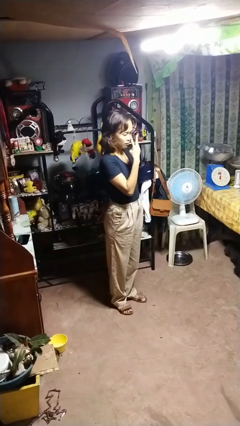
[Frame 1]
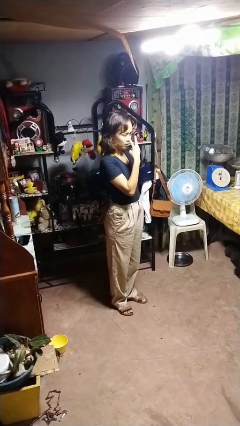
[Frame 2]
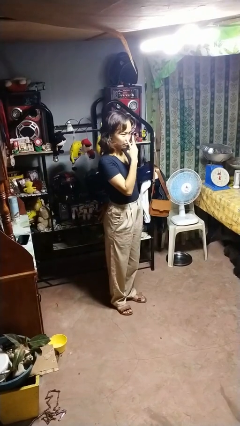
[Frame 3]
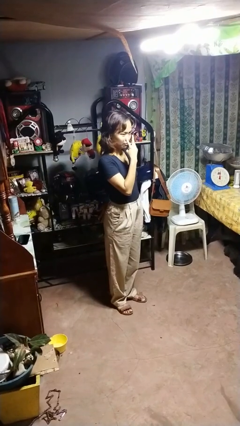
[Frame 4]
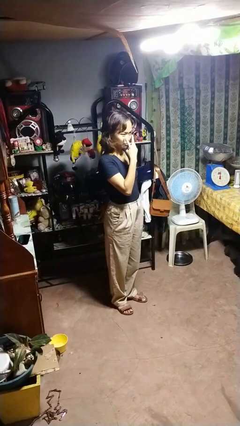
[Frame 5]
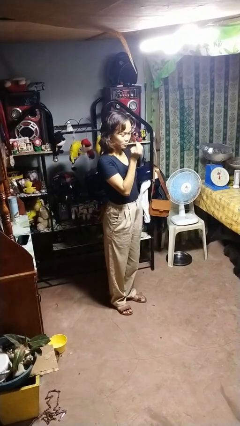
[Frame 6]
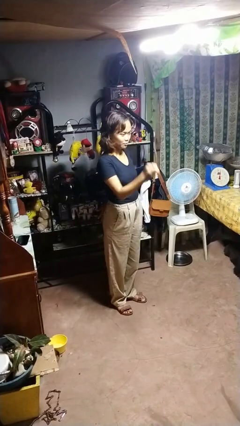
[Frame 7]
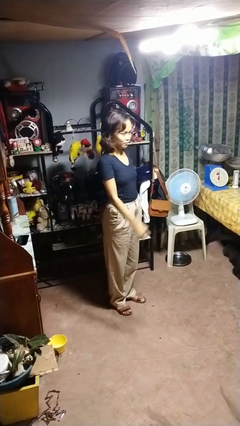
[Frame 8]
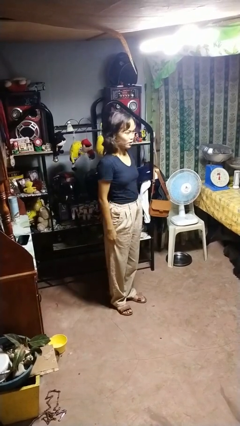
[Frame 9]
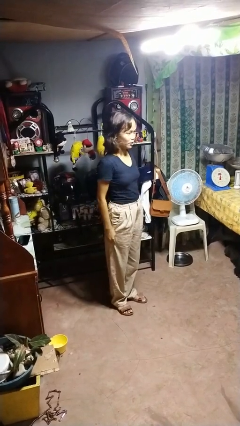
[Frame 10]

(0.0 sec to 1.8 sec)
person gestures watch closely

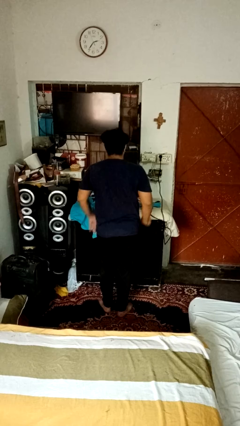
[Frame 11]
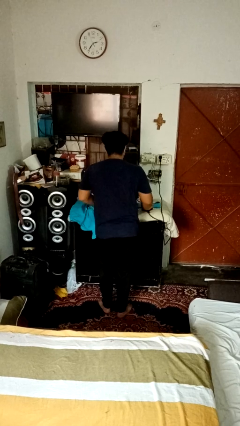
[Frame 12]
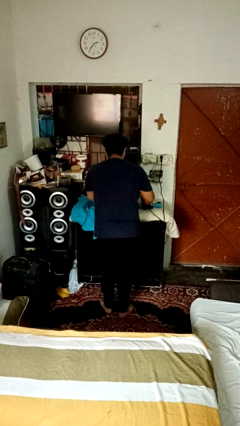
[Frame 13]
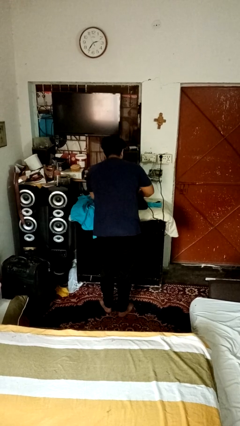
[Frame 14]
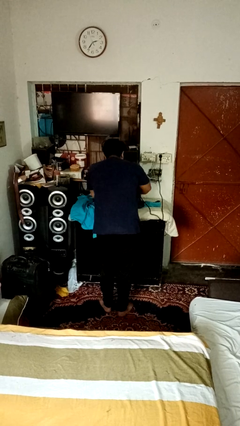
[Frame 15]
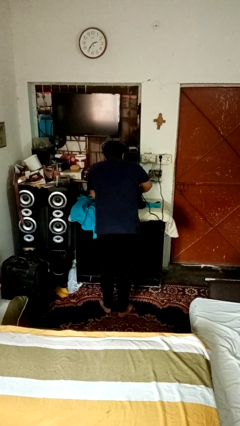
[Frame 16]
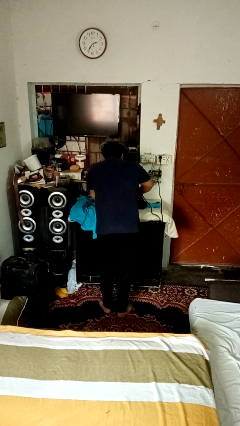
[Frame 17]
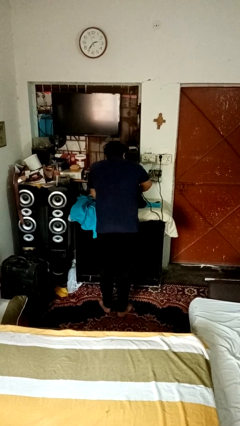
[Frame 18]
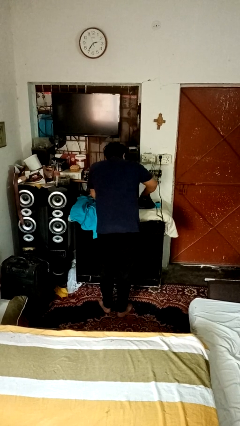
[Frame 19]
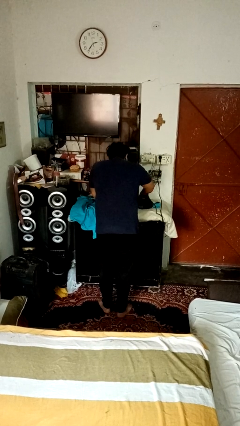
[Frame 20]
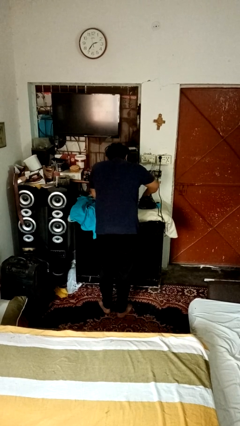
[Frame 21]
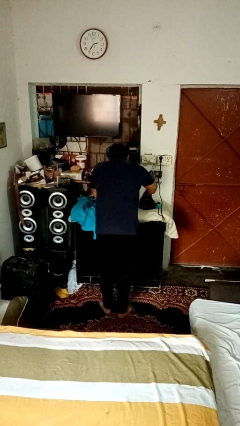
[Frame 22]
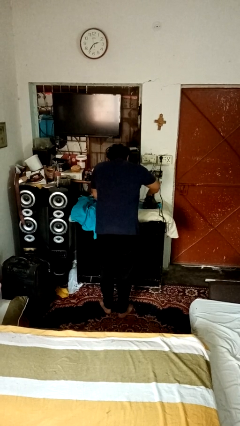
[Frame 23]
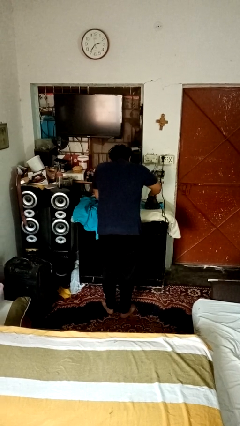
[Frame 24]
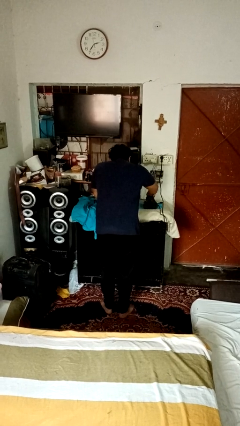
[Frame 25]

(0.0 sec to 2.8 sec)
person irons clothes

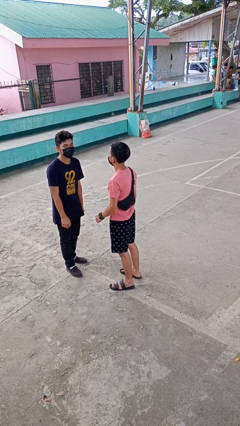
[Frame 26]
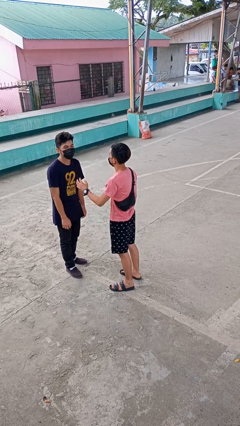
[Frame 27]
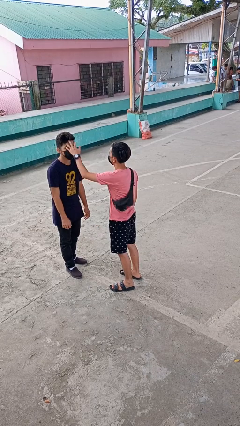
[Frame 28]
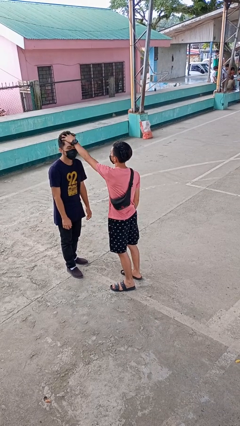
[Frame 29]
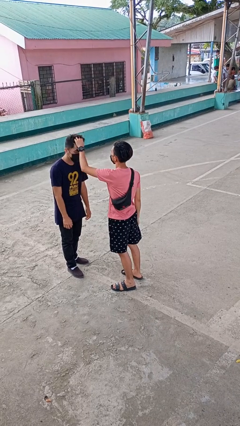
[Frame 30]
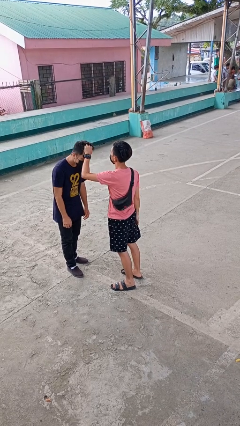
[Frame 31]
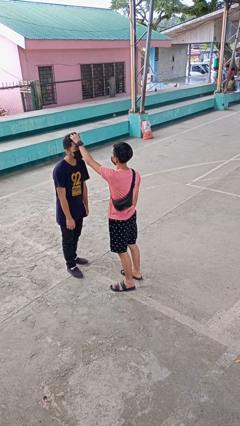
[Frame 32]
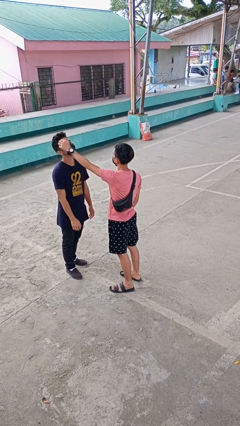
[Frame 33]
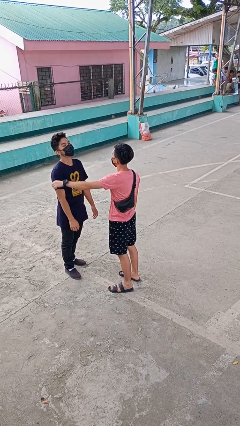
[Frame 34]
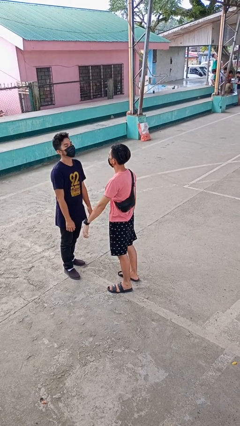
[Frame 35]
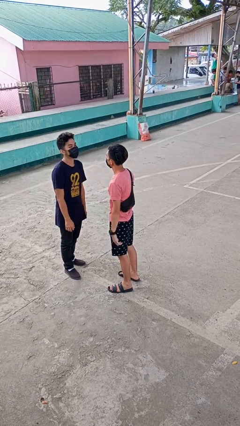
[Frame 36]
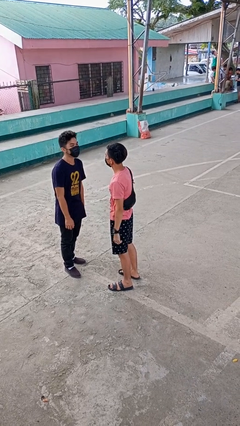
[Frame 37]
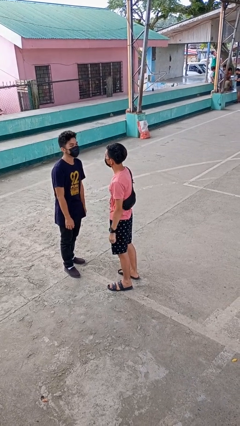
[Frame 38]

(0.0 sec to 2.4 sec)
person grabs person by hair

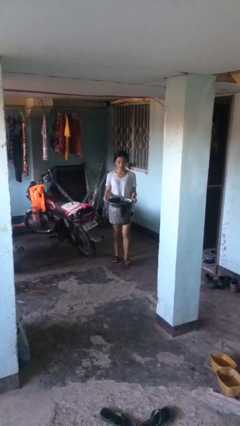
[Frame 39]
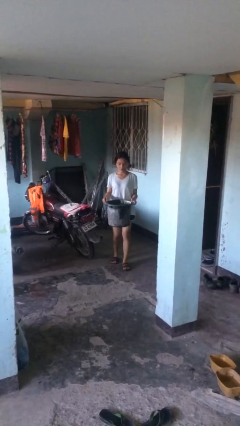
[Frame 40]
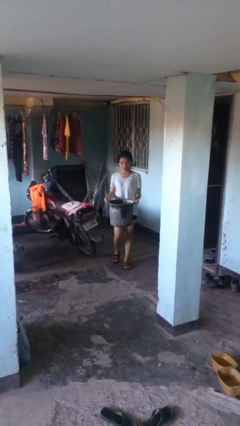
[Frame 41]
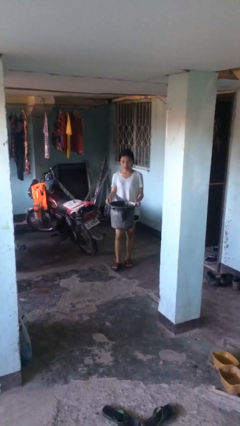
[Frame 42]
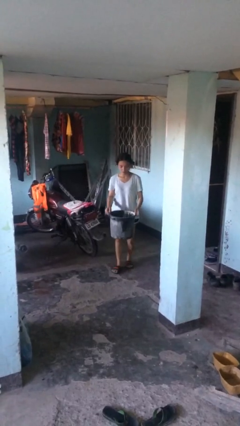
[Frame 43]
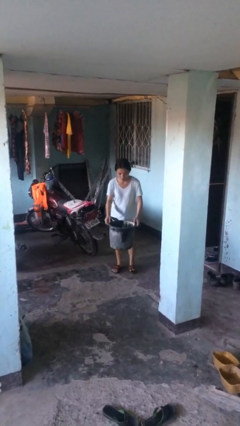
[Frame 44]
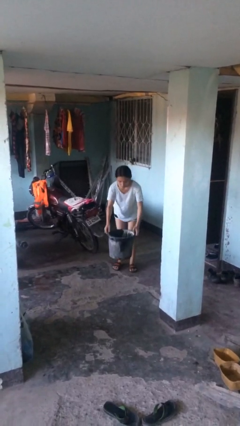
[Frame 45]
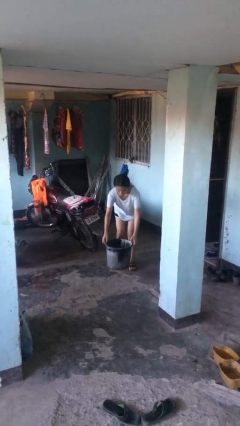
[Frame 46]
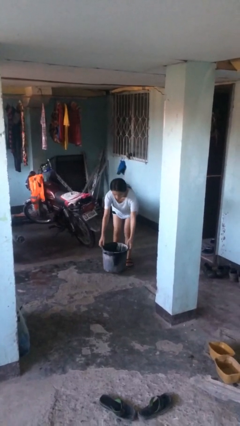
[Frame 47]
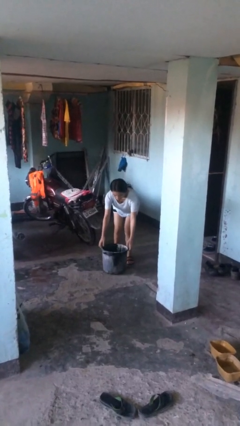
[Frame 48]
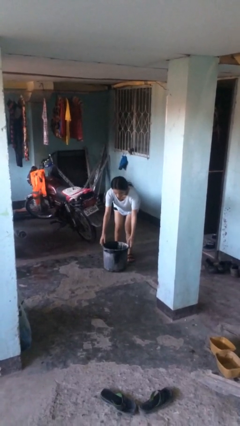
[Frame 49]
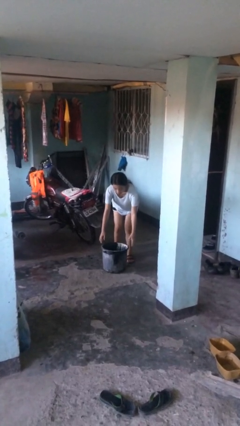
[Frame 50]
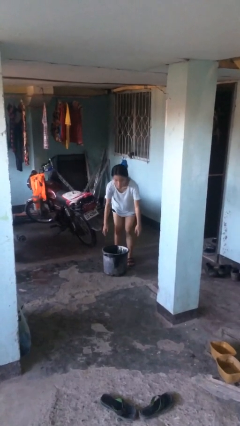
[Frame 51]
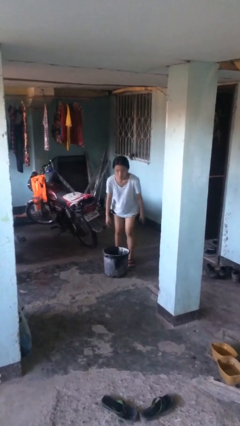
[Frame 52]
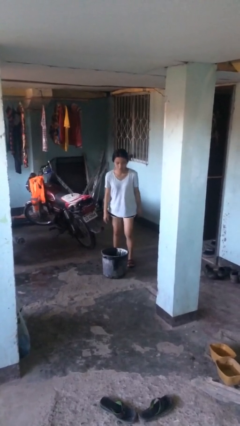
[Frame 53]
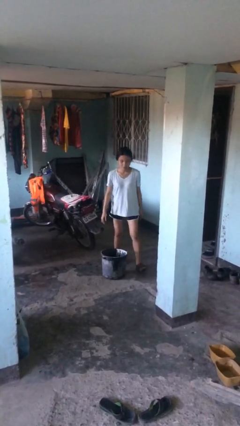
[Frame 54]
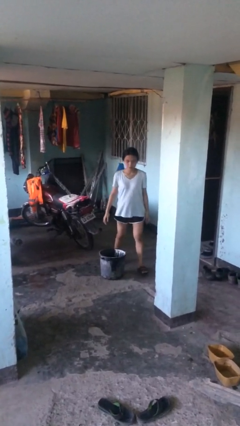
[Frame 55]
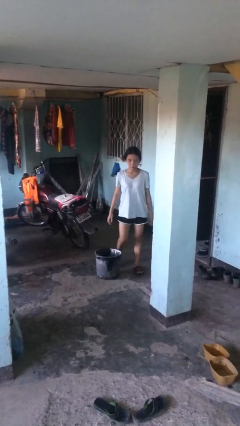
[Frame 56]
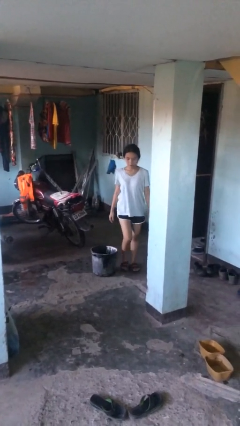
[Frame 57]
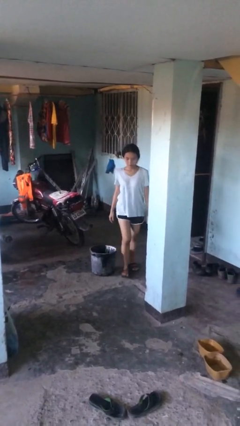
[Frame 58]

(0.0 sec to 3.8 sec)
person puts down object on floor

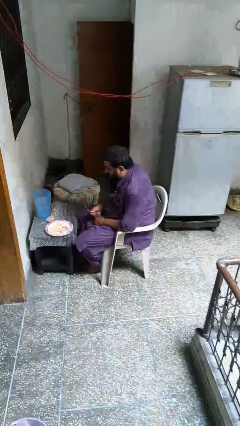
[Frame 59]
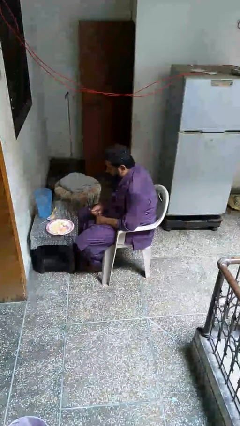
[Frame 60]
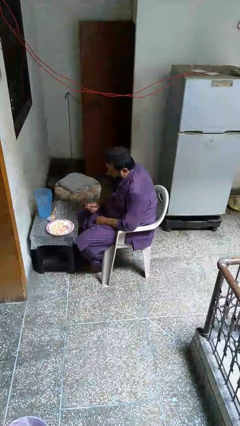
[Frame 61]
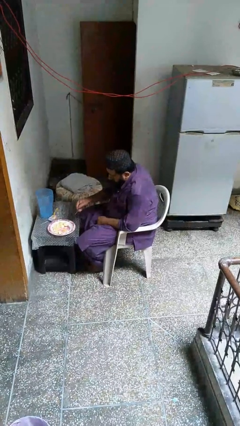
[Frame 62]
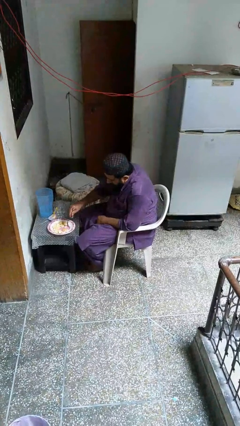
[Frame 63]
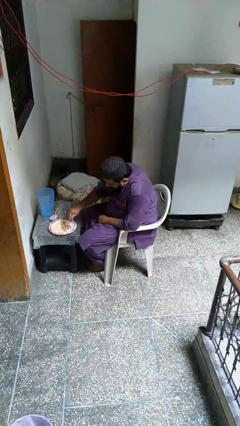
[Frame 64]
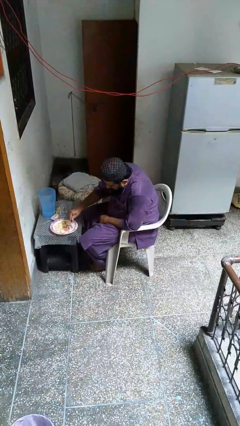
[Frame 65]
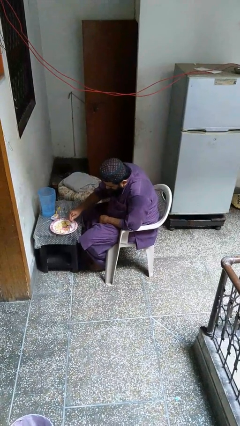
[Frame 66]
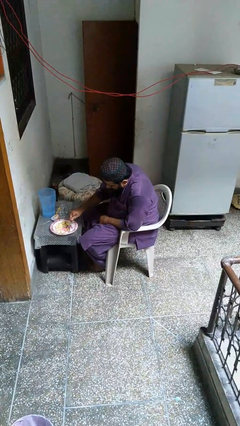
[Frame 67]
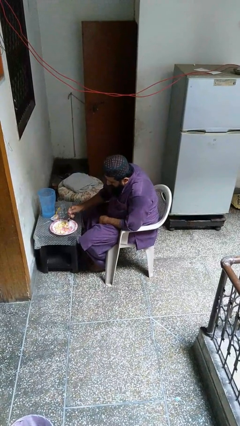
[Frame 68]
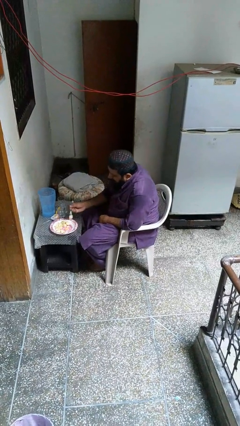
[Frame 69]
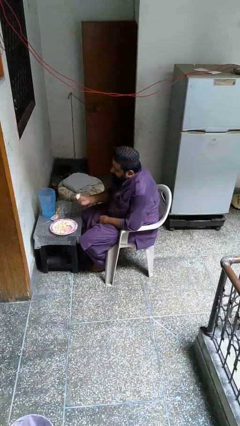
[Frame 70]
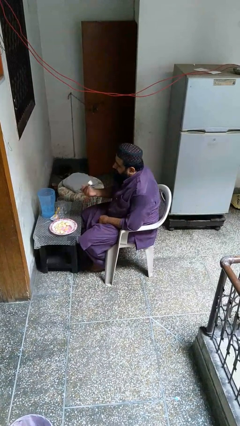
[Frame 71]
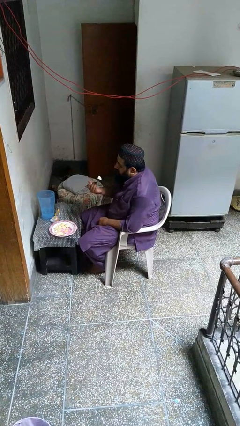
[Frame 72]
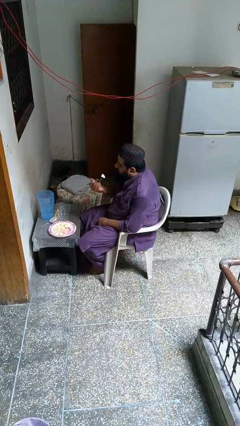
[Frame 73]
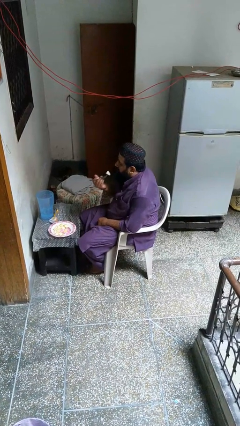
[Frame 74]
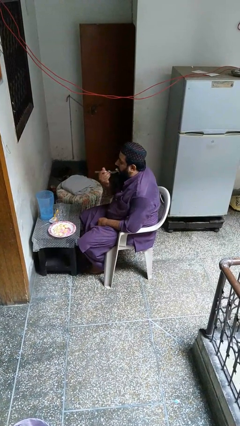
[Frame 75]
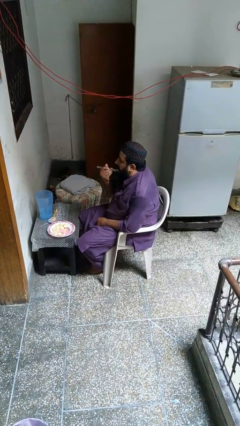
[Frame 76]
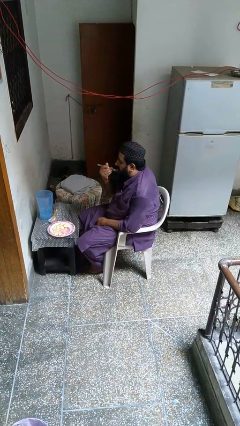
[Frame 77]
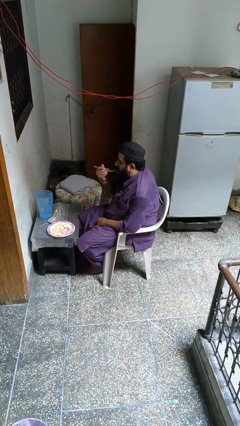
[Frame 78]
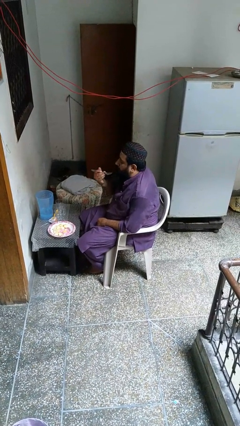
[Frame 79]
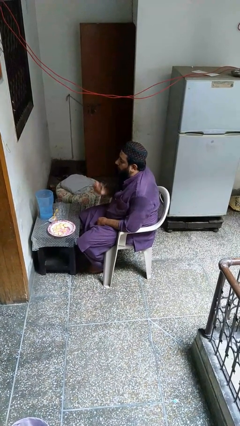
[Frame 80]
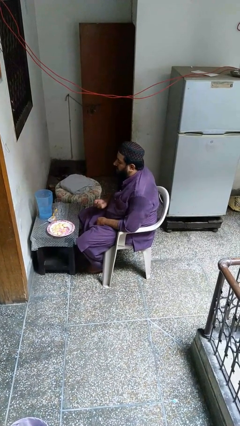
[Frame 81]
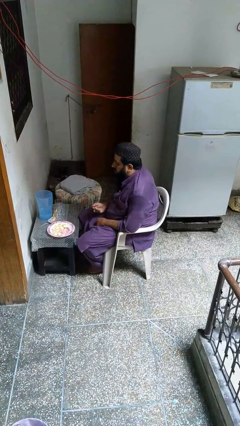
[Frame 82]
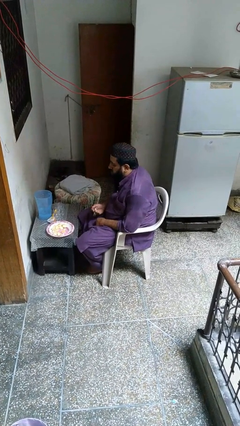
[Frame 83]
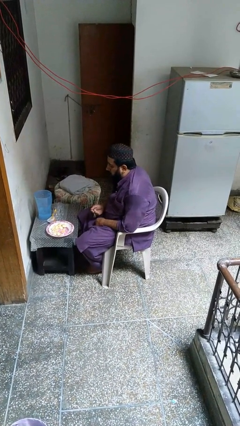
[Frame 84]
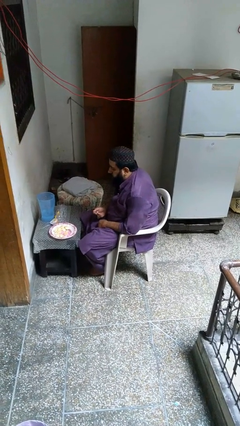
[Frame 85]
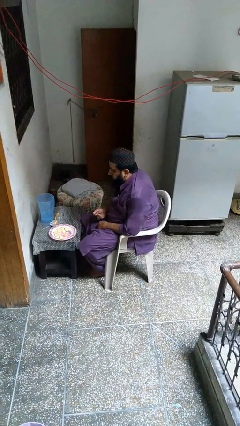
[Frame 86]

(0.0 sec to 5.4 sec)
person eats with utensil

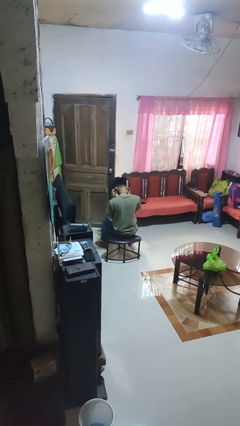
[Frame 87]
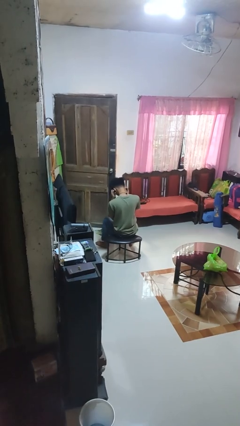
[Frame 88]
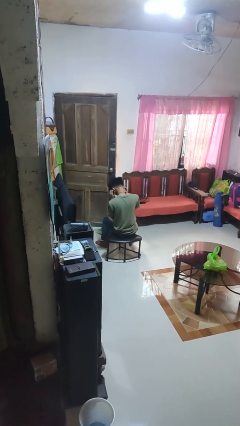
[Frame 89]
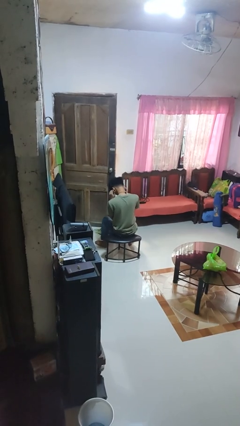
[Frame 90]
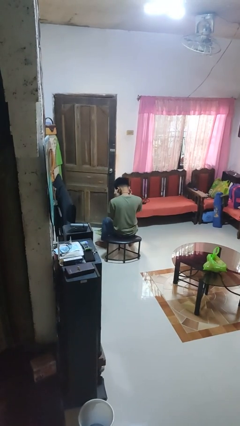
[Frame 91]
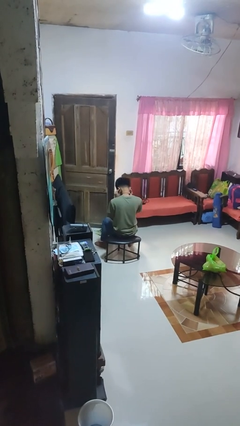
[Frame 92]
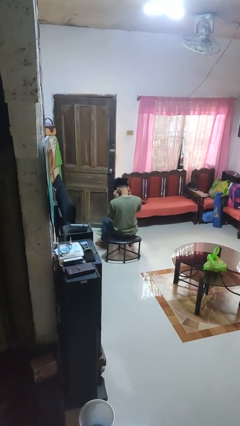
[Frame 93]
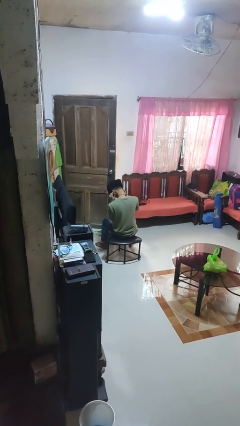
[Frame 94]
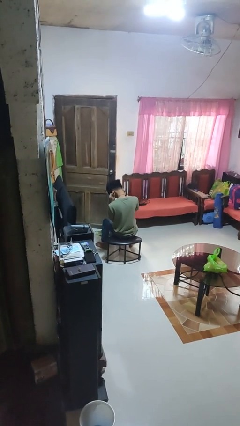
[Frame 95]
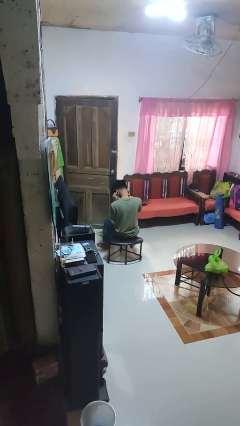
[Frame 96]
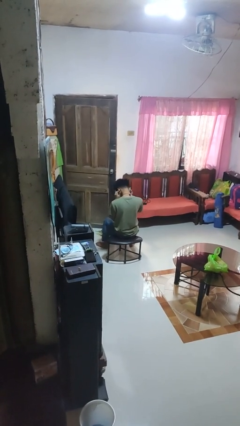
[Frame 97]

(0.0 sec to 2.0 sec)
person puts fingers in ear
